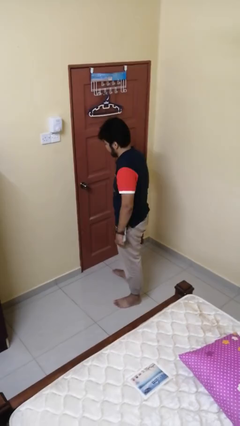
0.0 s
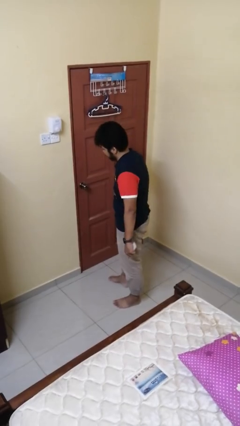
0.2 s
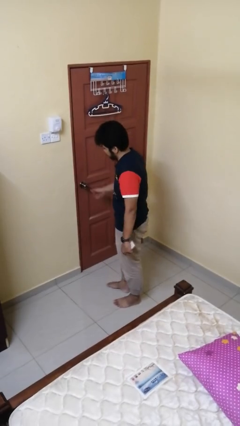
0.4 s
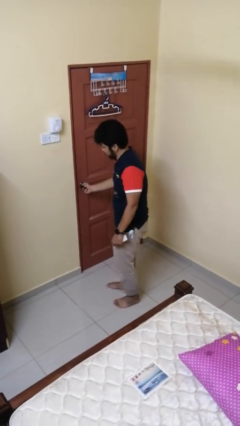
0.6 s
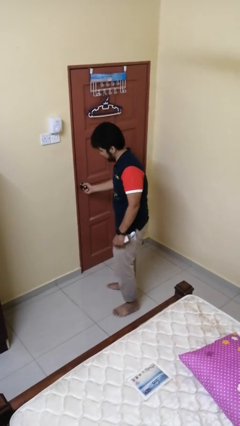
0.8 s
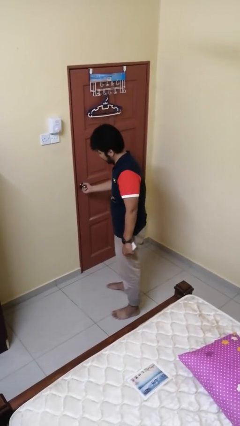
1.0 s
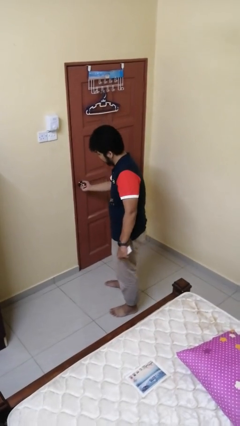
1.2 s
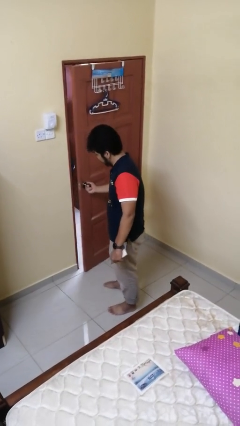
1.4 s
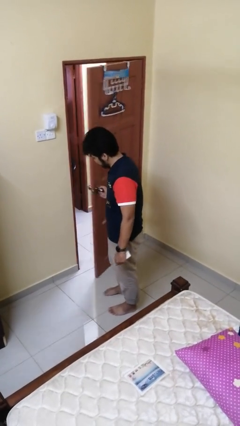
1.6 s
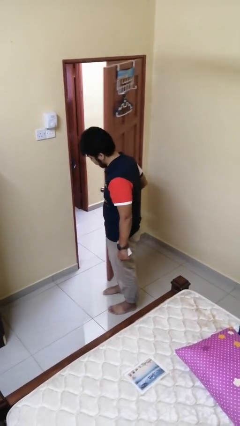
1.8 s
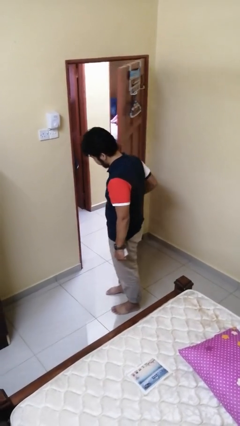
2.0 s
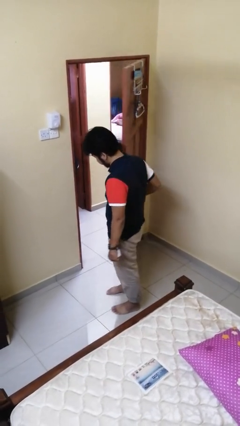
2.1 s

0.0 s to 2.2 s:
person opens facility door

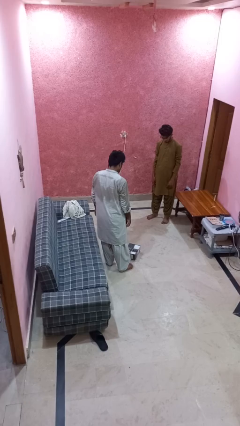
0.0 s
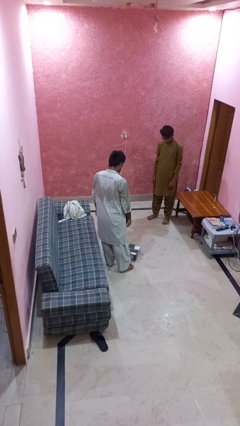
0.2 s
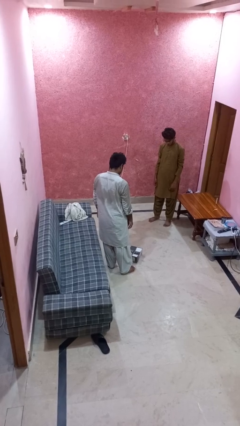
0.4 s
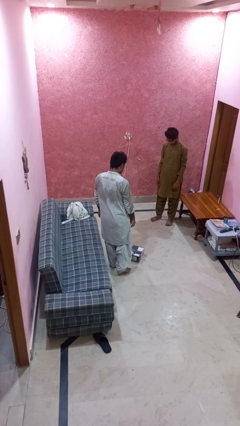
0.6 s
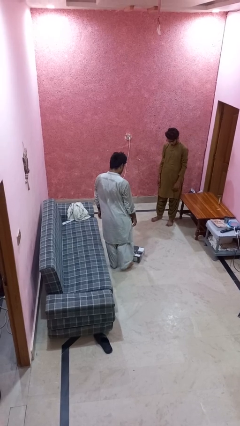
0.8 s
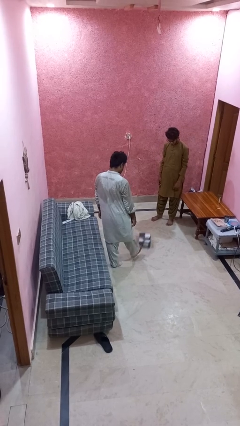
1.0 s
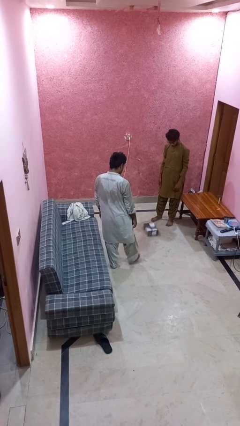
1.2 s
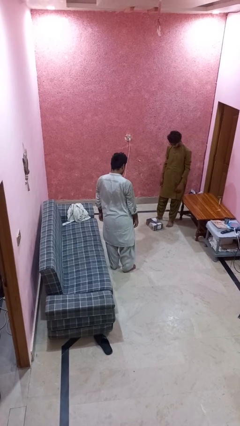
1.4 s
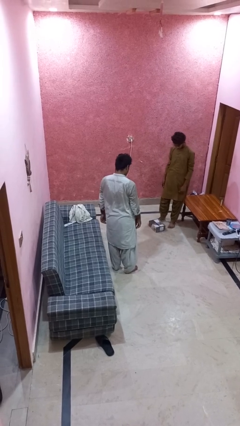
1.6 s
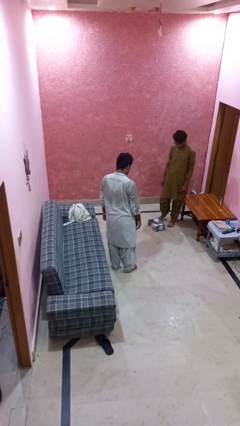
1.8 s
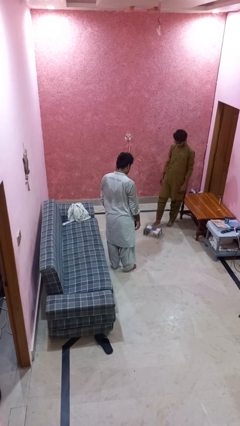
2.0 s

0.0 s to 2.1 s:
person kicks object to person

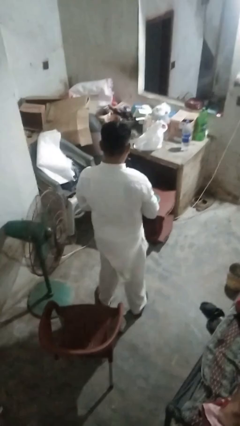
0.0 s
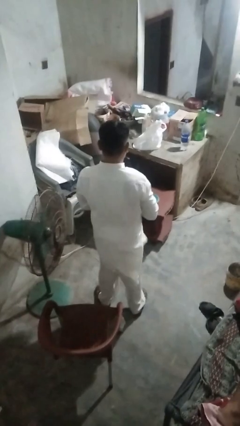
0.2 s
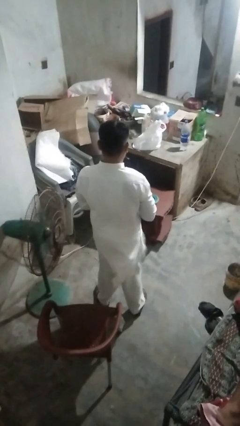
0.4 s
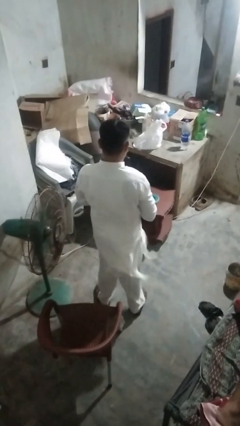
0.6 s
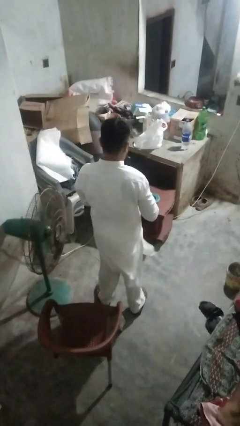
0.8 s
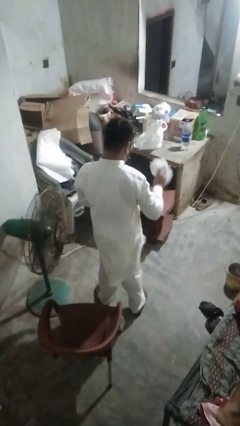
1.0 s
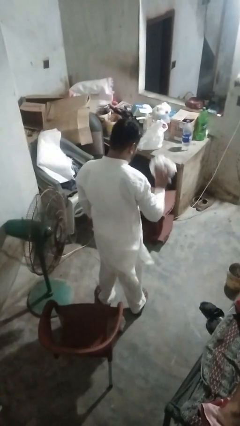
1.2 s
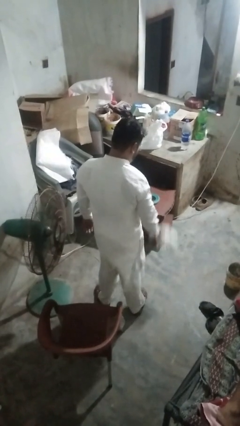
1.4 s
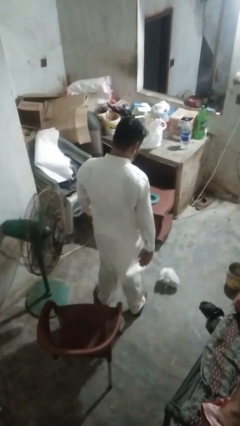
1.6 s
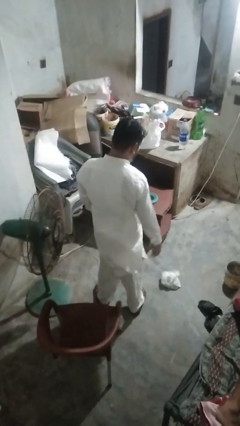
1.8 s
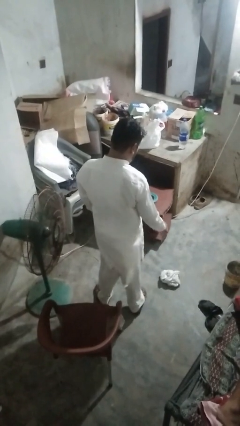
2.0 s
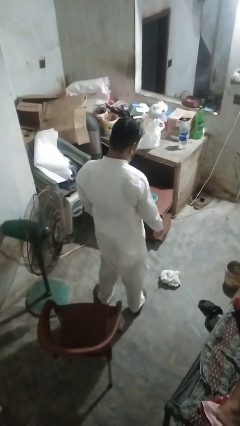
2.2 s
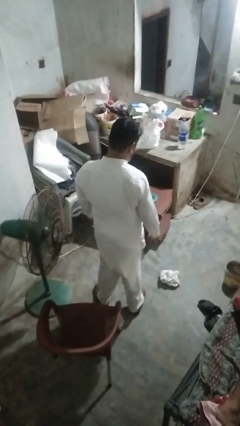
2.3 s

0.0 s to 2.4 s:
person throws object to ground

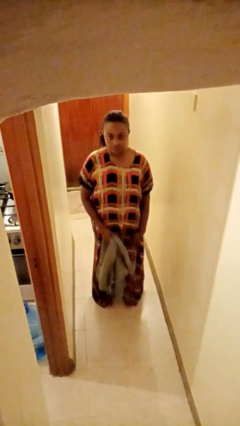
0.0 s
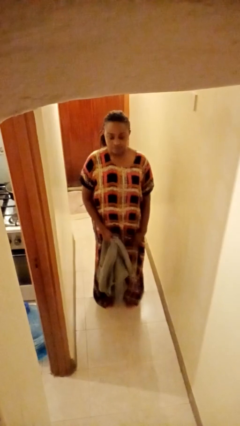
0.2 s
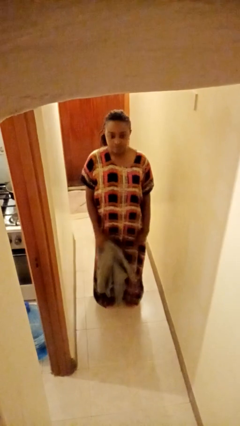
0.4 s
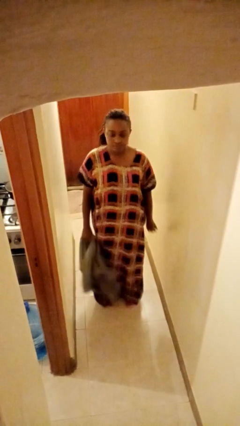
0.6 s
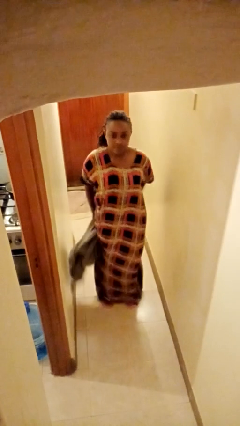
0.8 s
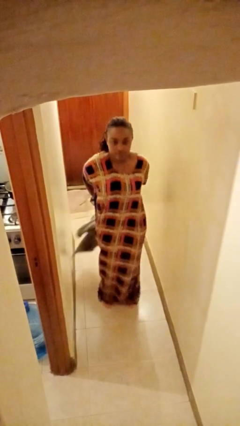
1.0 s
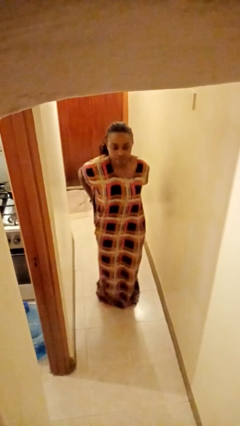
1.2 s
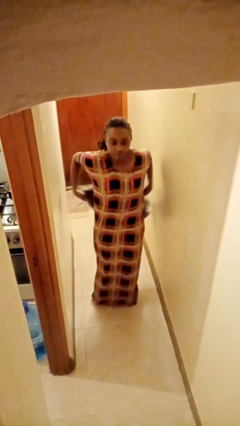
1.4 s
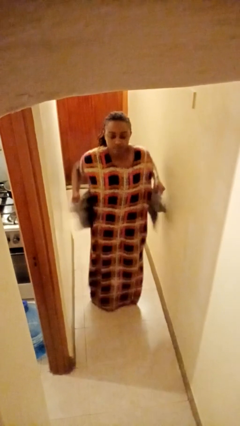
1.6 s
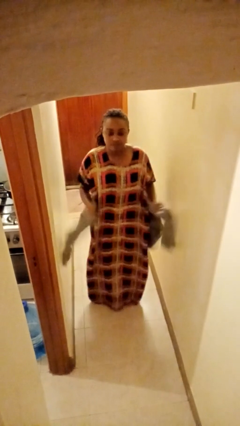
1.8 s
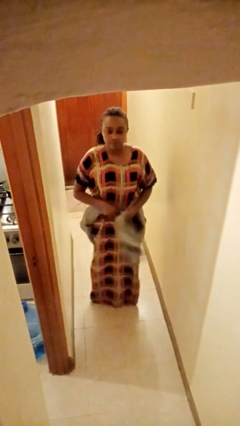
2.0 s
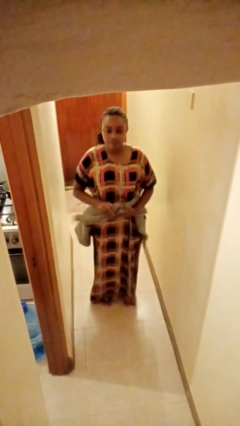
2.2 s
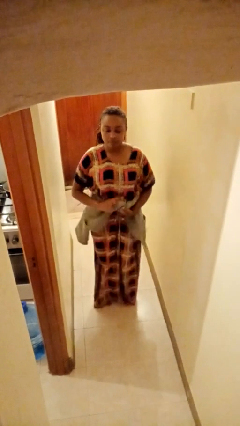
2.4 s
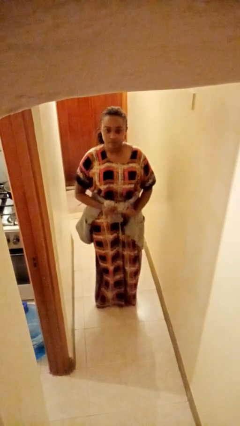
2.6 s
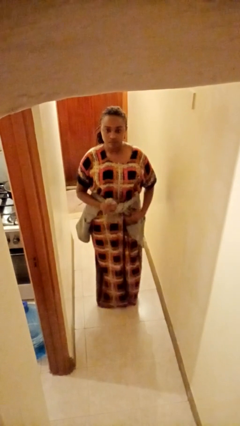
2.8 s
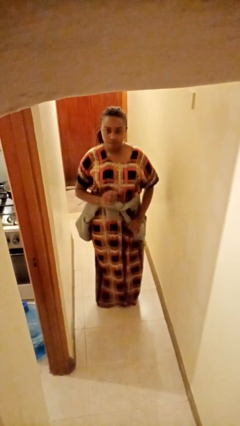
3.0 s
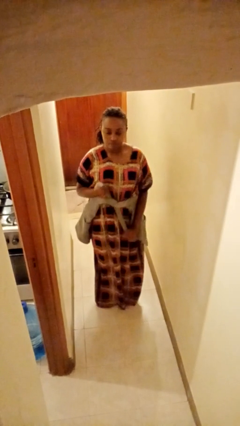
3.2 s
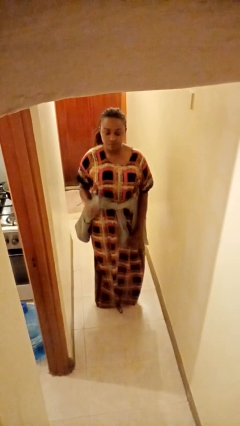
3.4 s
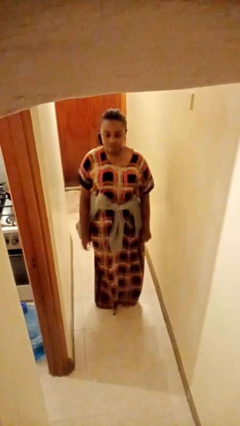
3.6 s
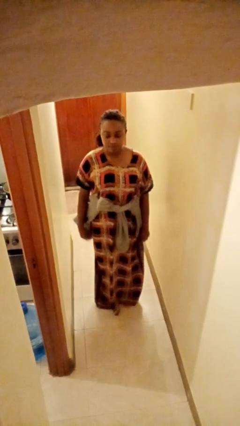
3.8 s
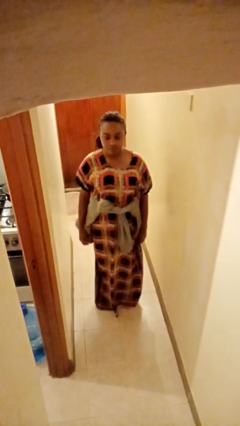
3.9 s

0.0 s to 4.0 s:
person ties jacket around waist

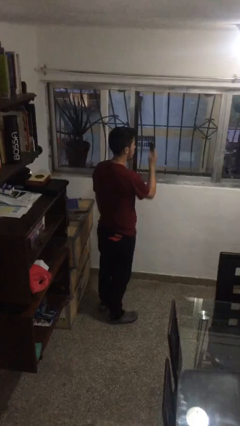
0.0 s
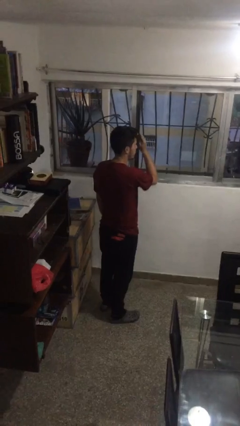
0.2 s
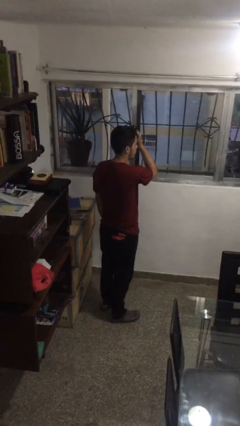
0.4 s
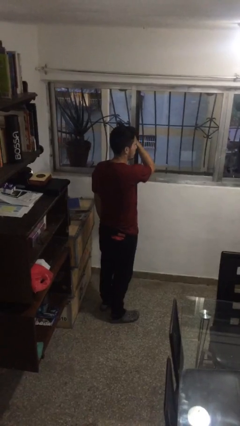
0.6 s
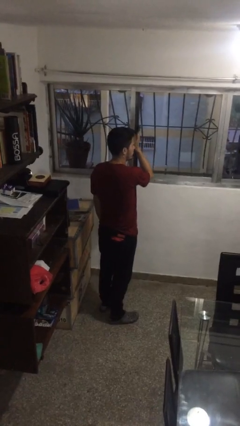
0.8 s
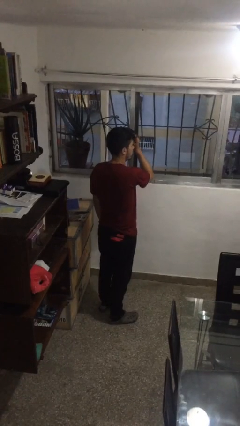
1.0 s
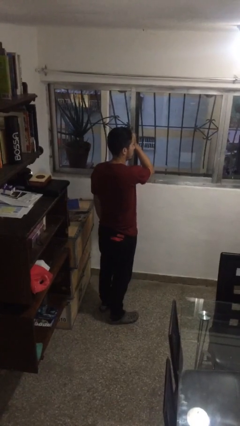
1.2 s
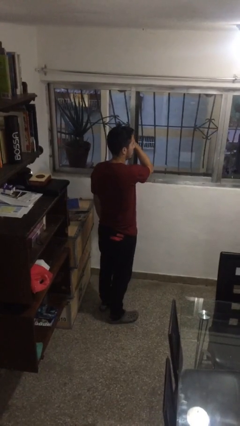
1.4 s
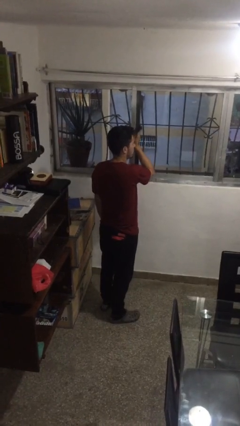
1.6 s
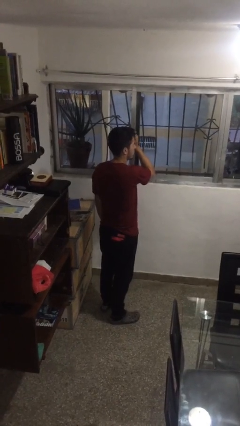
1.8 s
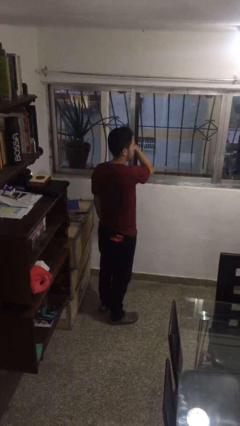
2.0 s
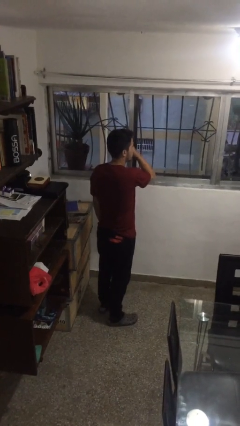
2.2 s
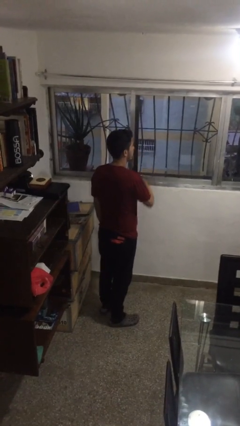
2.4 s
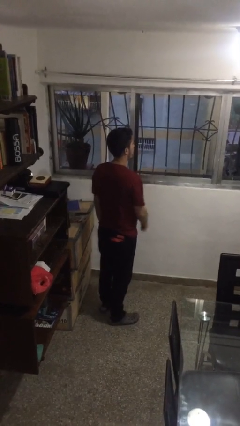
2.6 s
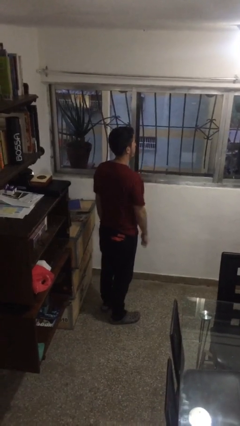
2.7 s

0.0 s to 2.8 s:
person brushes hair

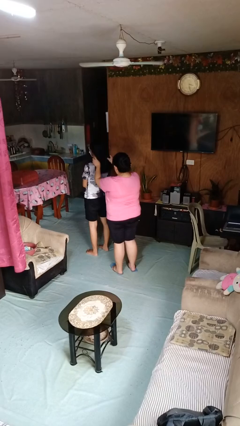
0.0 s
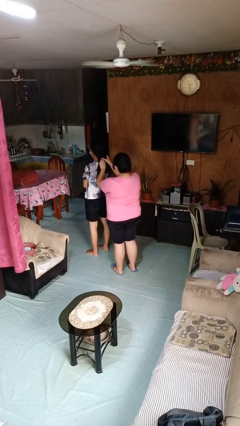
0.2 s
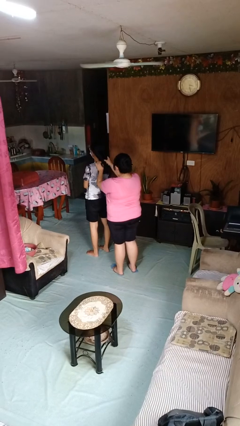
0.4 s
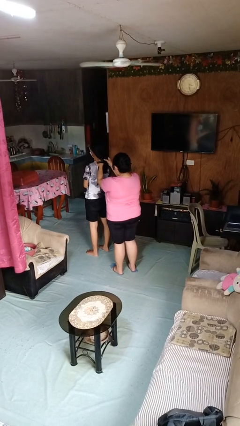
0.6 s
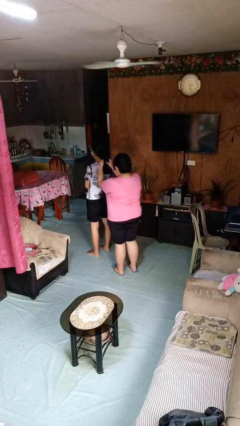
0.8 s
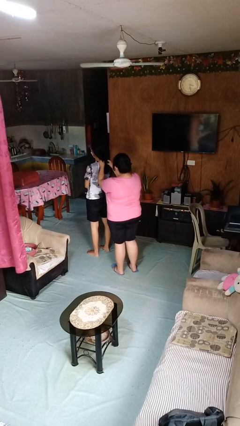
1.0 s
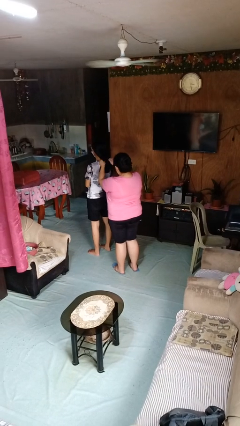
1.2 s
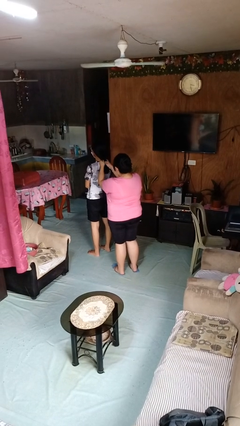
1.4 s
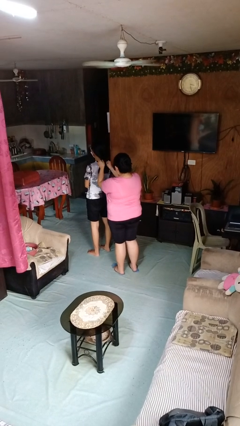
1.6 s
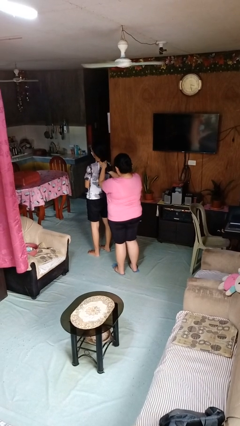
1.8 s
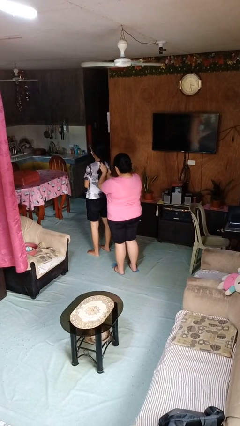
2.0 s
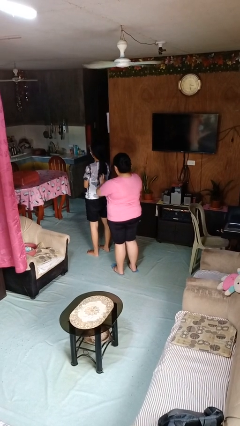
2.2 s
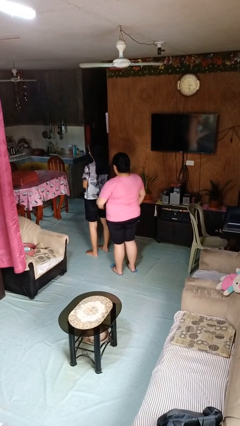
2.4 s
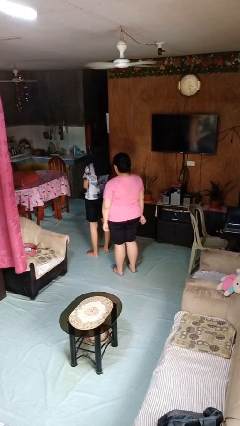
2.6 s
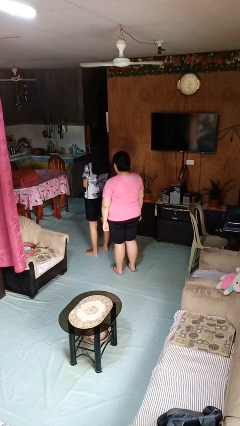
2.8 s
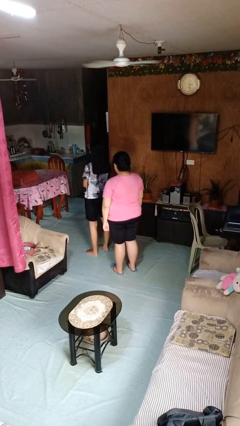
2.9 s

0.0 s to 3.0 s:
person braids hair of person

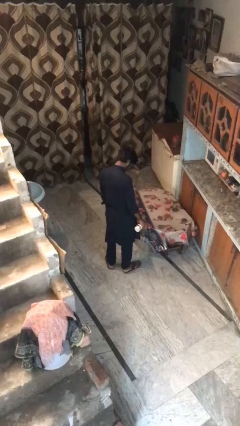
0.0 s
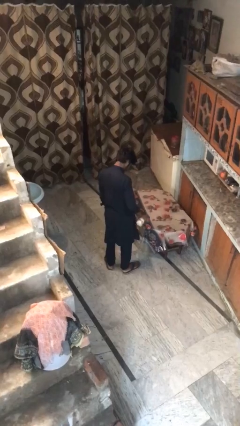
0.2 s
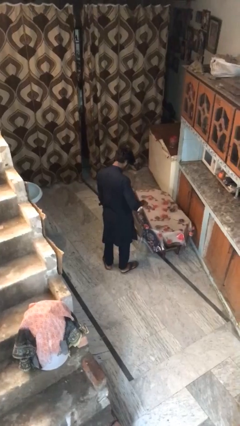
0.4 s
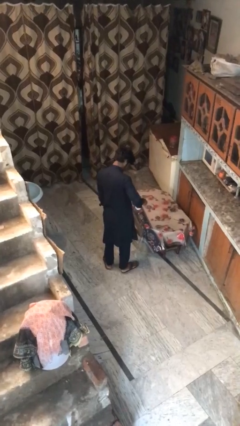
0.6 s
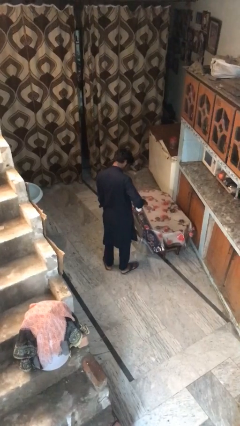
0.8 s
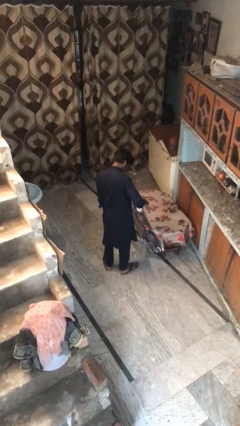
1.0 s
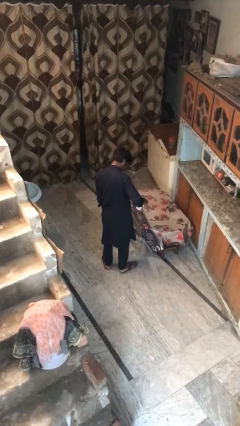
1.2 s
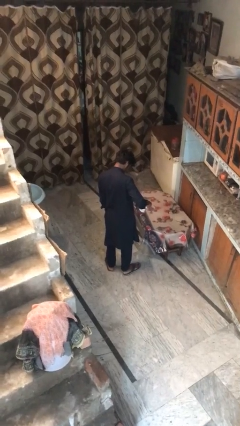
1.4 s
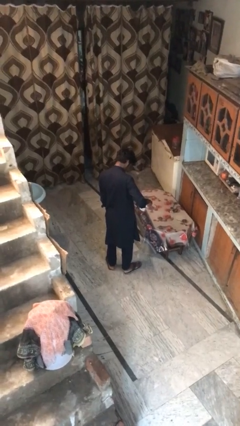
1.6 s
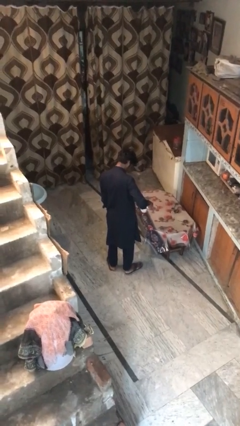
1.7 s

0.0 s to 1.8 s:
person sprays from bottle
